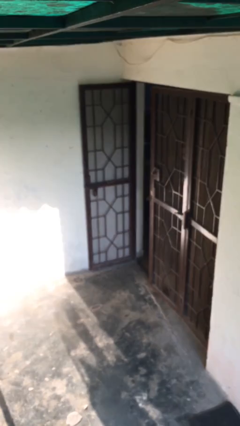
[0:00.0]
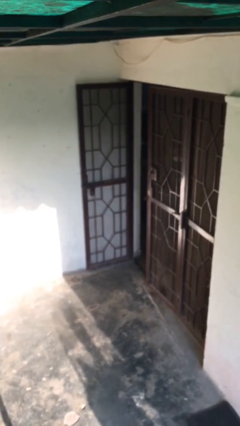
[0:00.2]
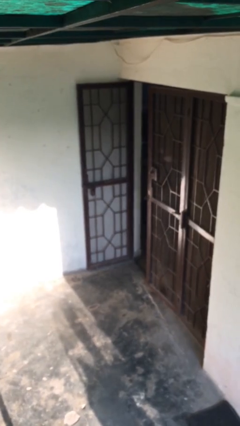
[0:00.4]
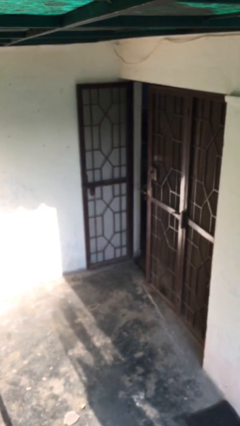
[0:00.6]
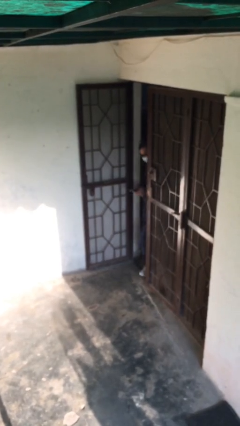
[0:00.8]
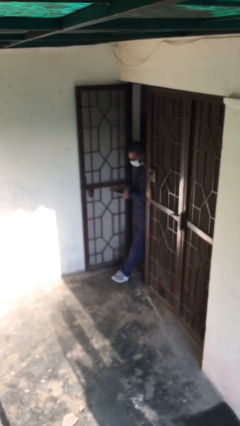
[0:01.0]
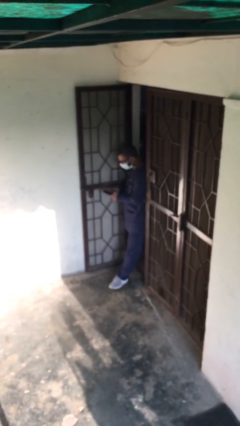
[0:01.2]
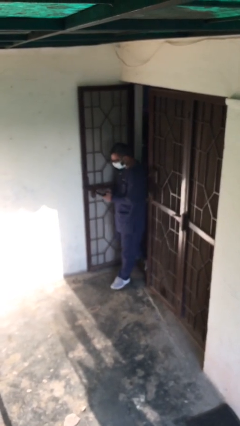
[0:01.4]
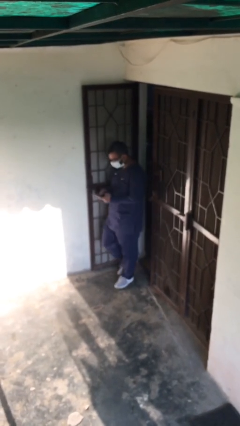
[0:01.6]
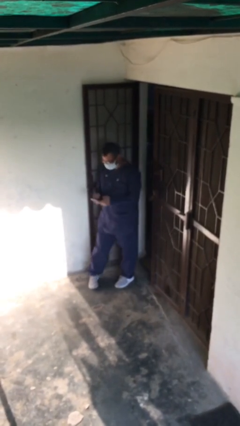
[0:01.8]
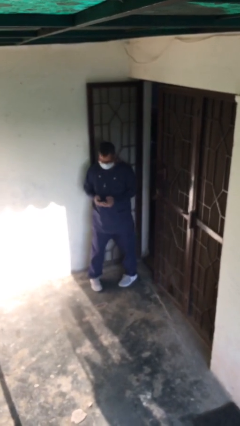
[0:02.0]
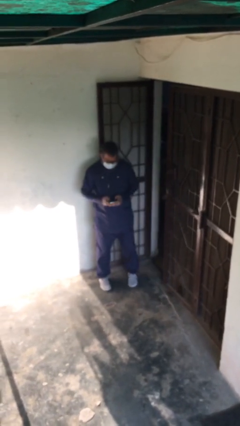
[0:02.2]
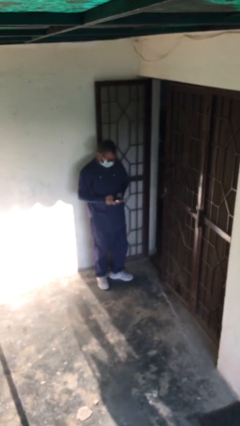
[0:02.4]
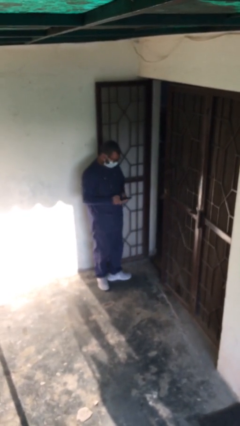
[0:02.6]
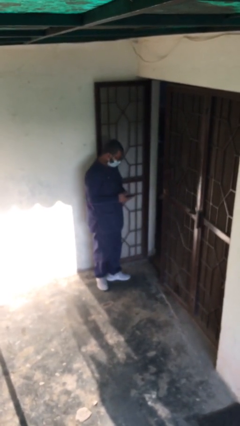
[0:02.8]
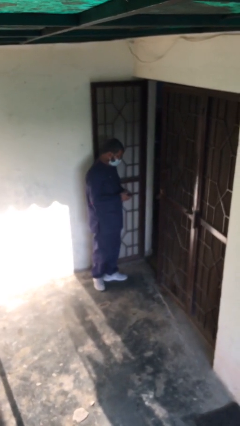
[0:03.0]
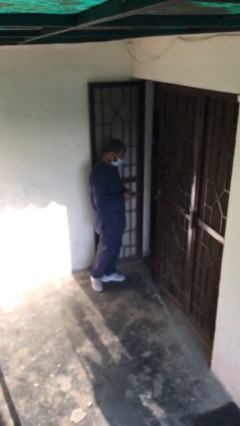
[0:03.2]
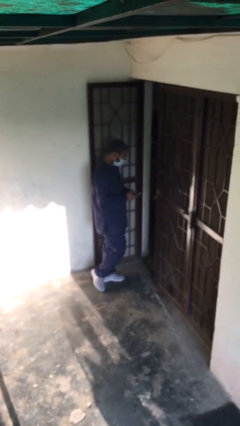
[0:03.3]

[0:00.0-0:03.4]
person enters scene through structure

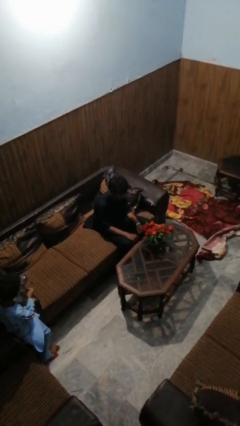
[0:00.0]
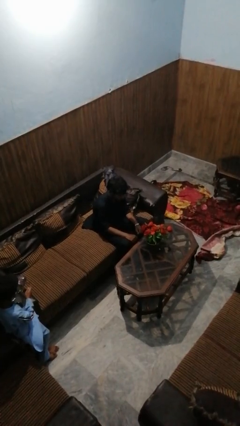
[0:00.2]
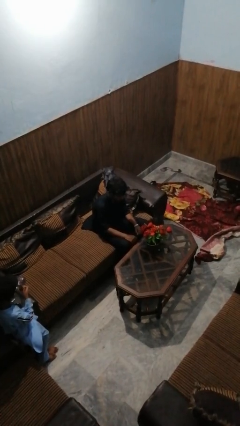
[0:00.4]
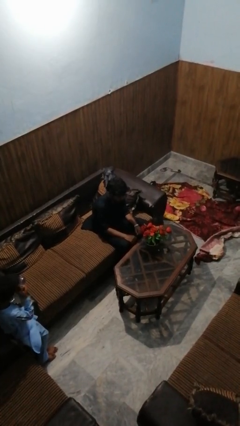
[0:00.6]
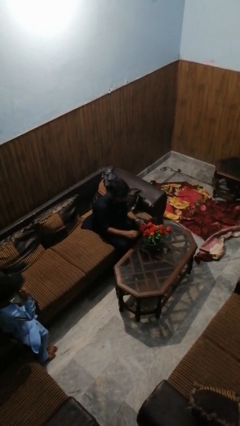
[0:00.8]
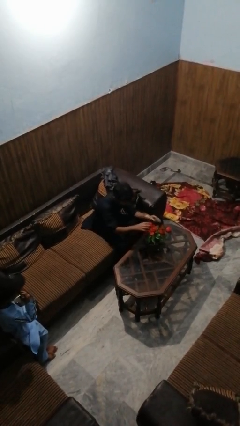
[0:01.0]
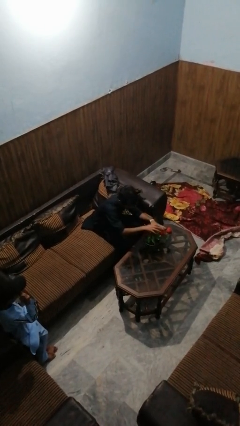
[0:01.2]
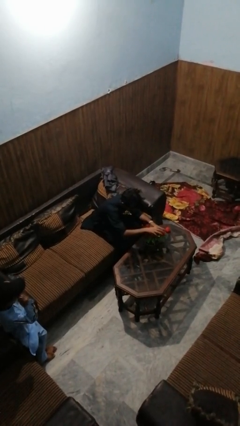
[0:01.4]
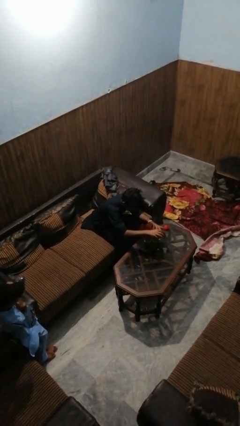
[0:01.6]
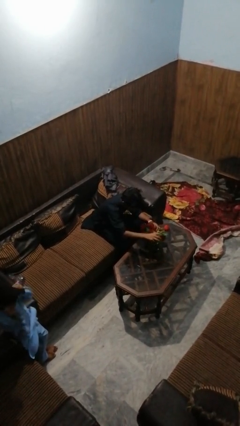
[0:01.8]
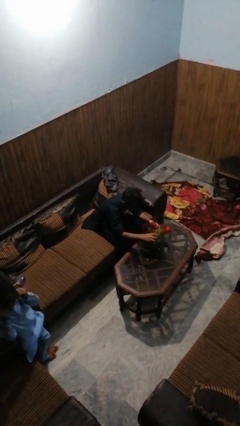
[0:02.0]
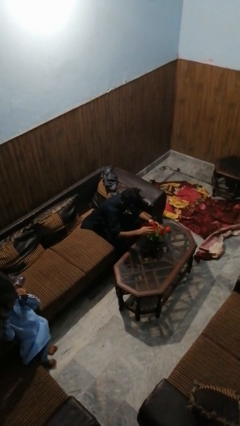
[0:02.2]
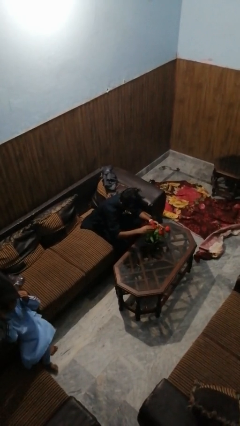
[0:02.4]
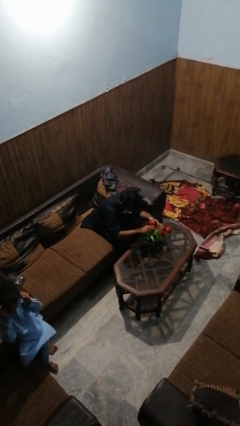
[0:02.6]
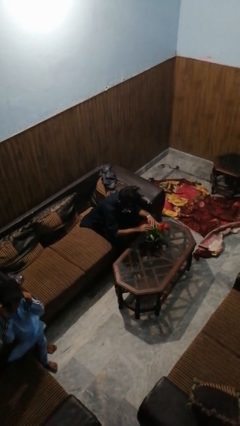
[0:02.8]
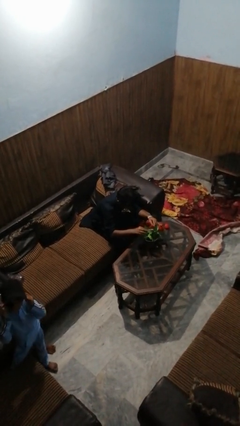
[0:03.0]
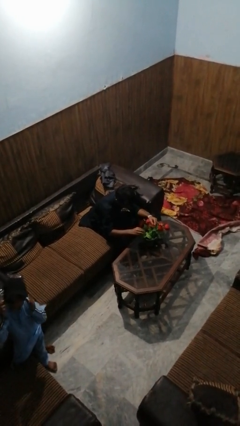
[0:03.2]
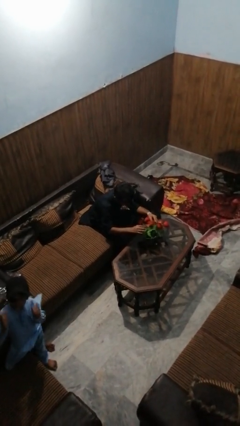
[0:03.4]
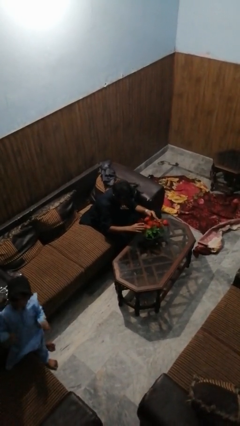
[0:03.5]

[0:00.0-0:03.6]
person arranges flowers in vase

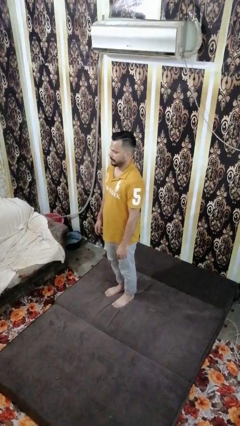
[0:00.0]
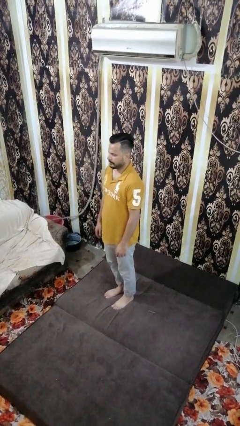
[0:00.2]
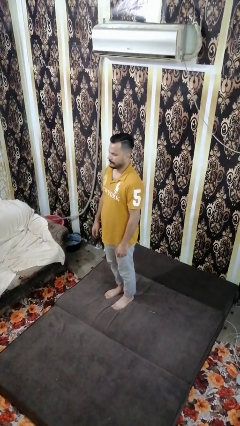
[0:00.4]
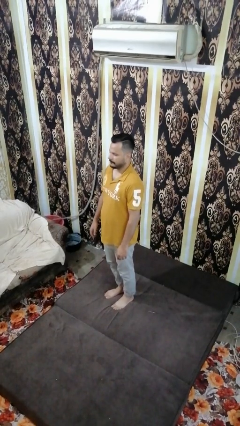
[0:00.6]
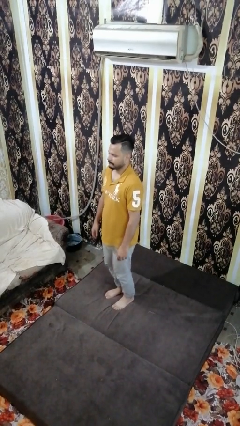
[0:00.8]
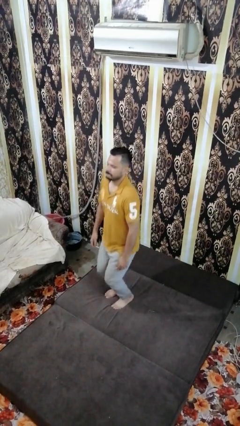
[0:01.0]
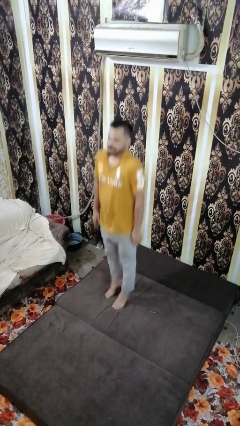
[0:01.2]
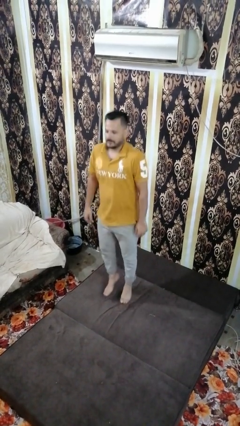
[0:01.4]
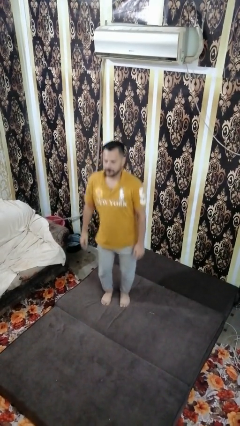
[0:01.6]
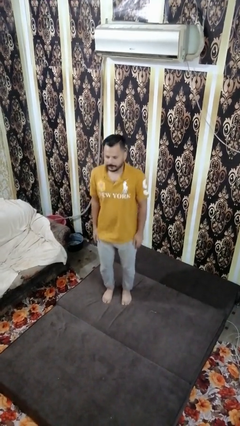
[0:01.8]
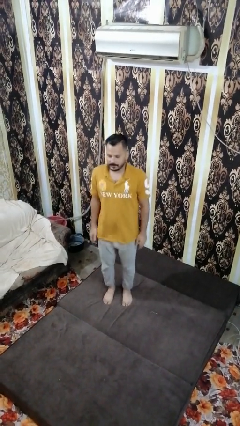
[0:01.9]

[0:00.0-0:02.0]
person jumps on bed

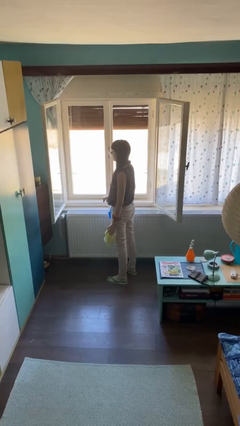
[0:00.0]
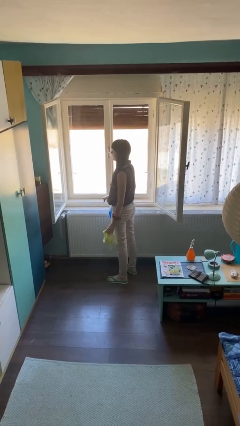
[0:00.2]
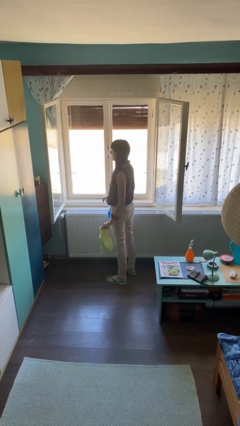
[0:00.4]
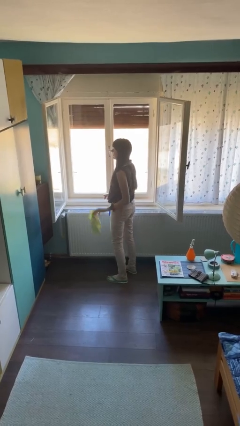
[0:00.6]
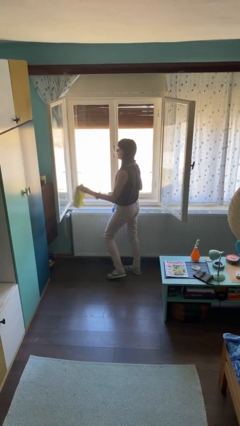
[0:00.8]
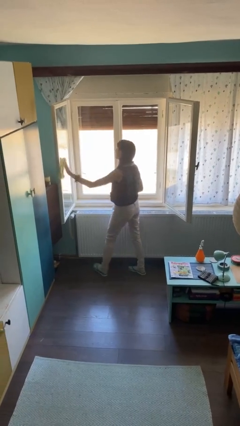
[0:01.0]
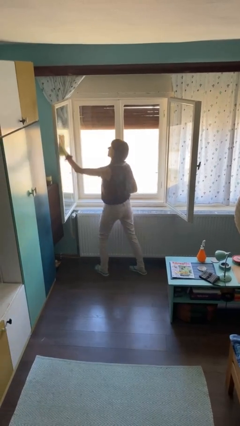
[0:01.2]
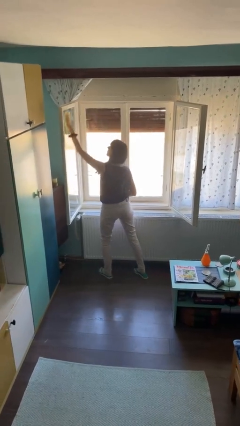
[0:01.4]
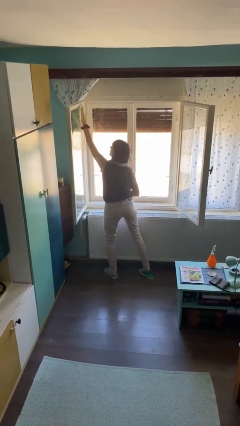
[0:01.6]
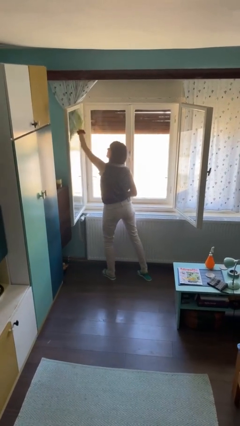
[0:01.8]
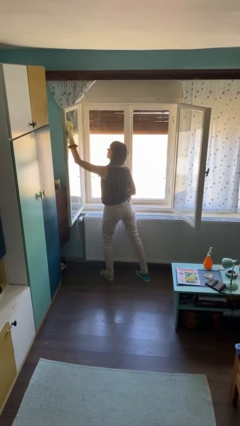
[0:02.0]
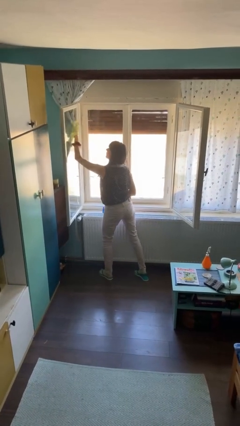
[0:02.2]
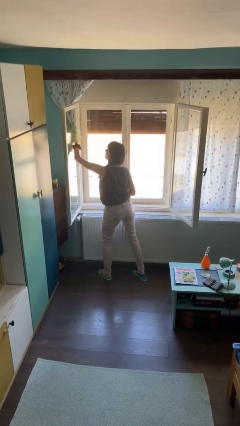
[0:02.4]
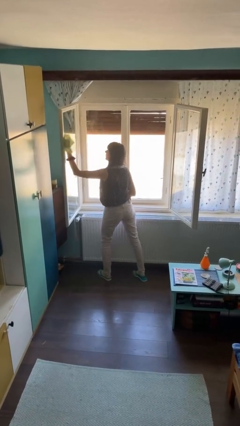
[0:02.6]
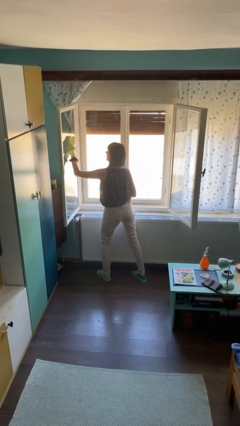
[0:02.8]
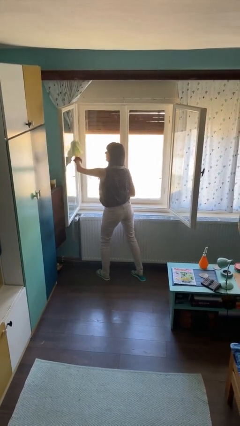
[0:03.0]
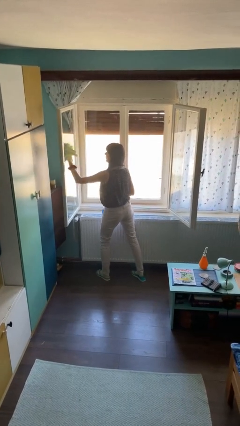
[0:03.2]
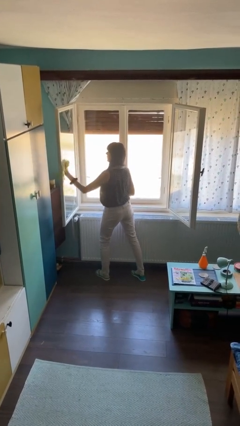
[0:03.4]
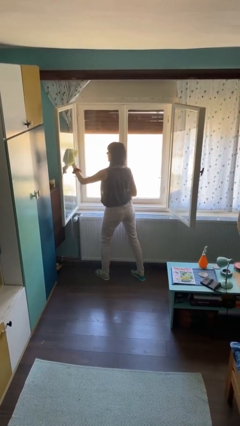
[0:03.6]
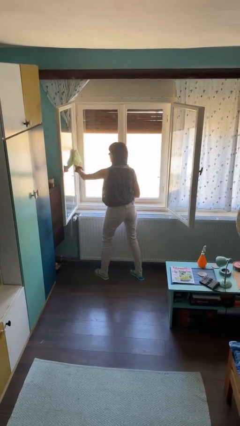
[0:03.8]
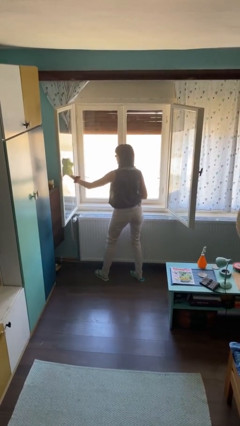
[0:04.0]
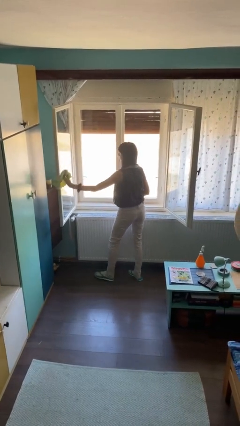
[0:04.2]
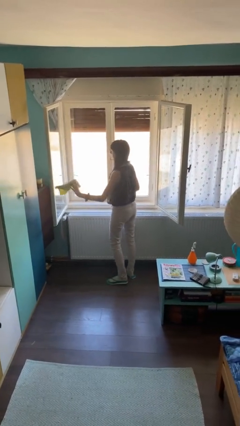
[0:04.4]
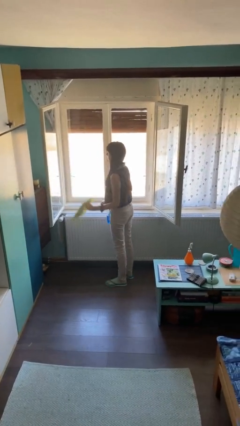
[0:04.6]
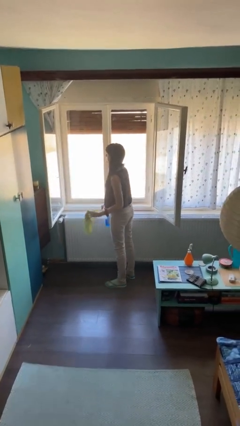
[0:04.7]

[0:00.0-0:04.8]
person washes window

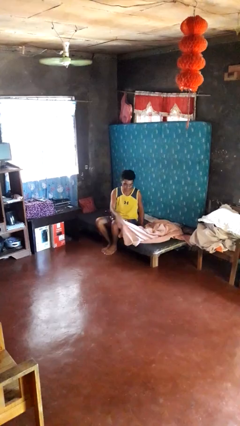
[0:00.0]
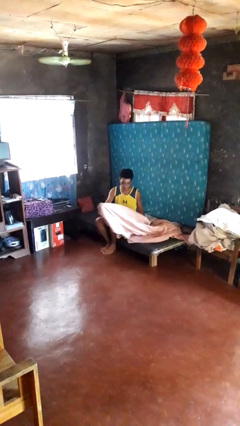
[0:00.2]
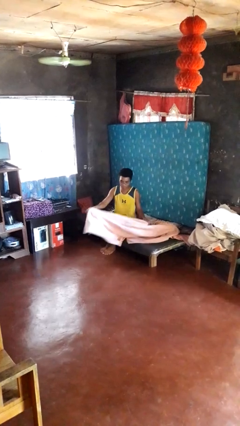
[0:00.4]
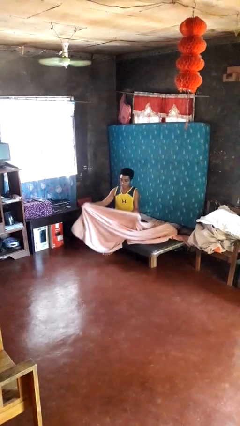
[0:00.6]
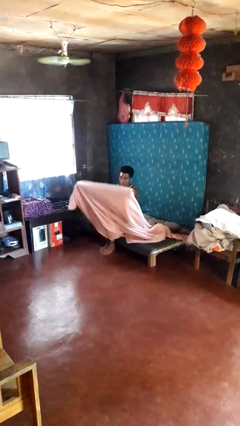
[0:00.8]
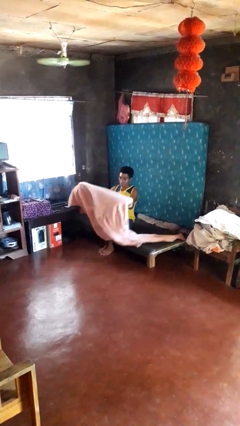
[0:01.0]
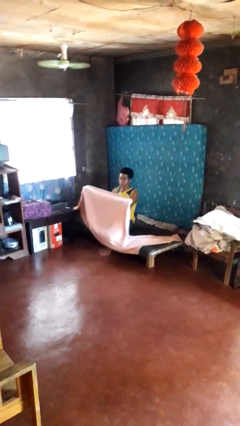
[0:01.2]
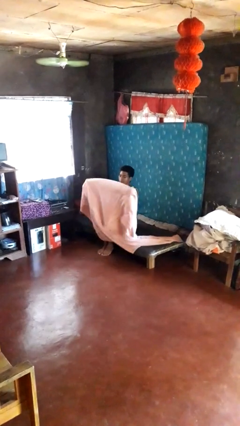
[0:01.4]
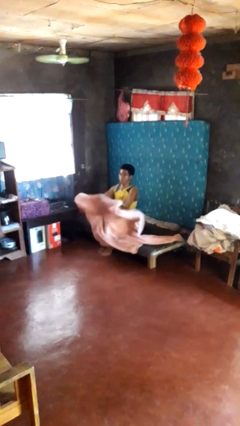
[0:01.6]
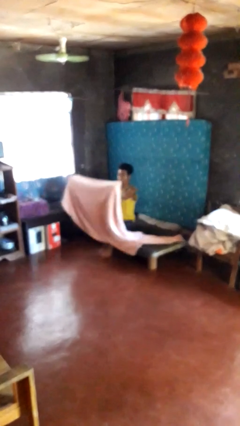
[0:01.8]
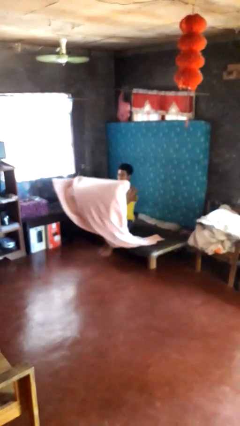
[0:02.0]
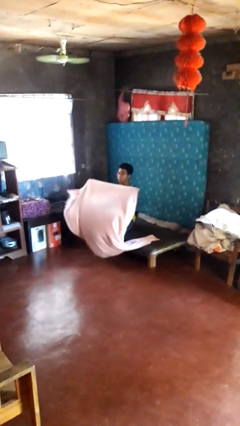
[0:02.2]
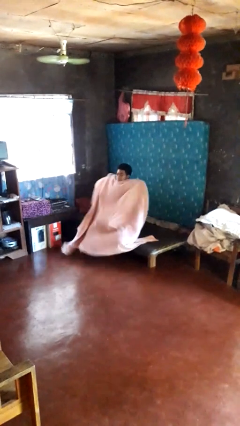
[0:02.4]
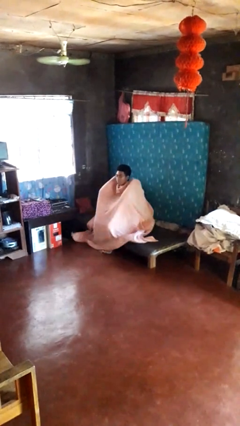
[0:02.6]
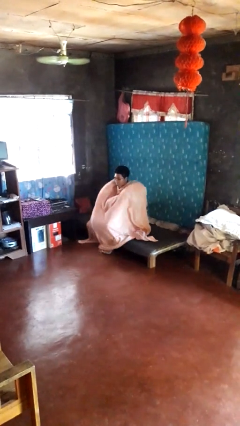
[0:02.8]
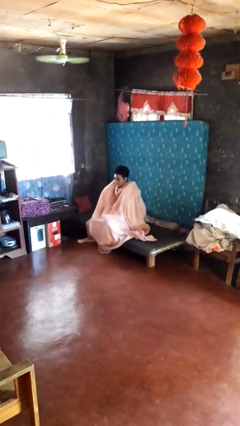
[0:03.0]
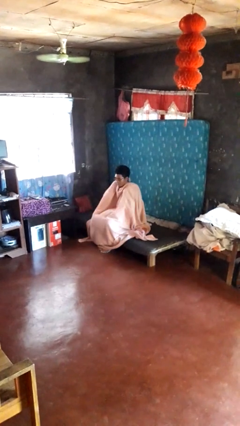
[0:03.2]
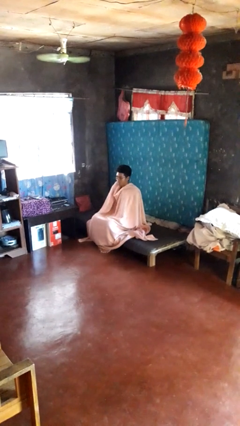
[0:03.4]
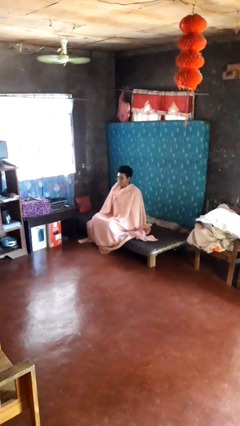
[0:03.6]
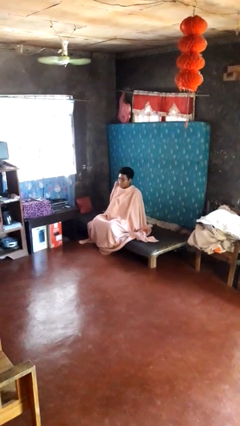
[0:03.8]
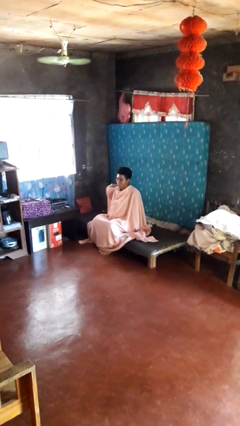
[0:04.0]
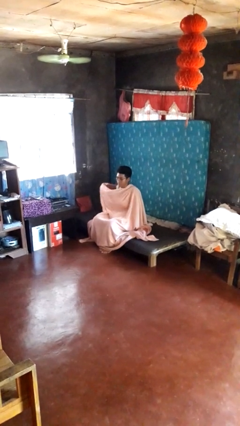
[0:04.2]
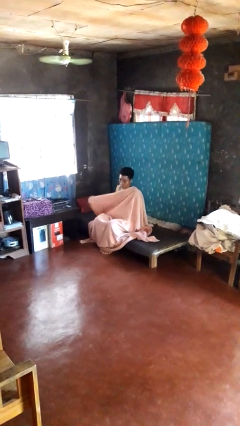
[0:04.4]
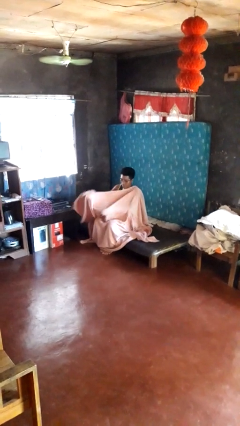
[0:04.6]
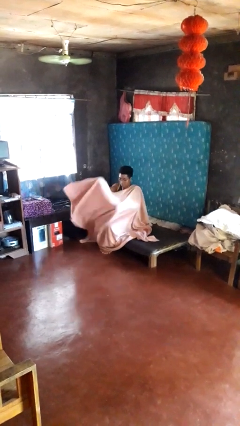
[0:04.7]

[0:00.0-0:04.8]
person covers with blanket
